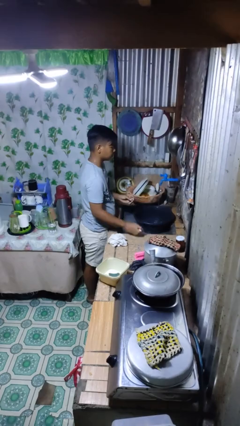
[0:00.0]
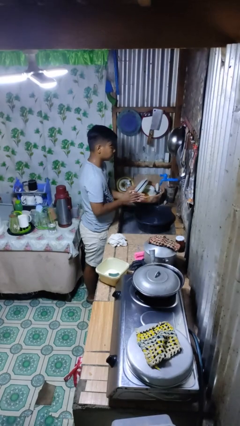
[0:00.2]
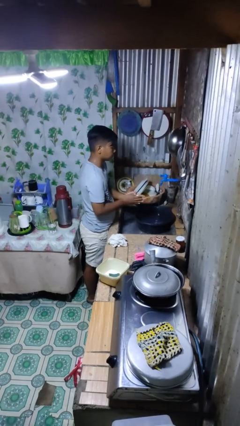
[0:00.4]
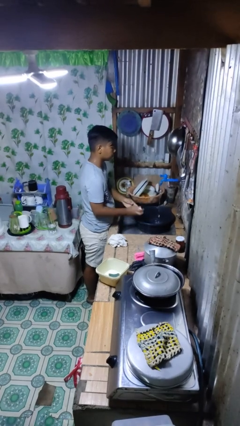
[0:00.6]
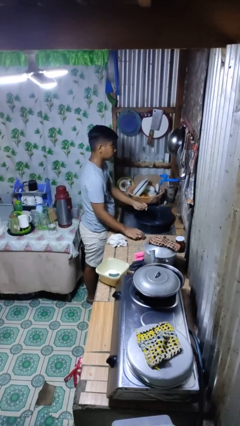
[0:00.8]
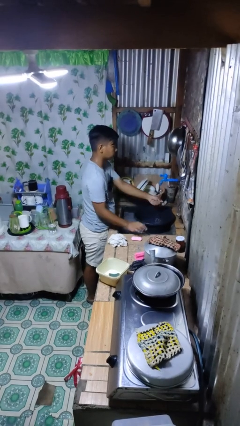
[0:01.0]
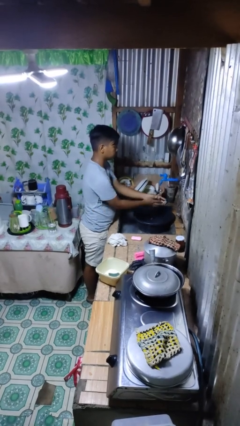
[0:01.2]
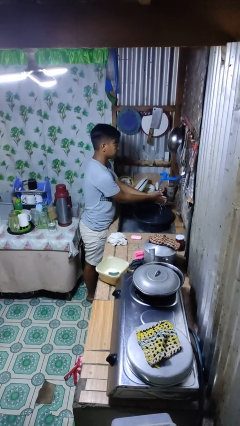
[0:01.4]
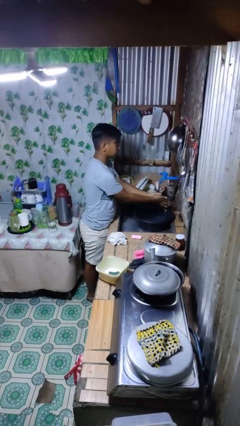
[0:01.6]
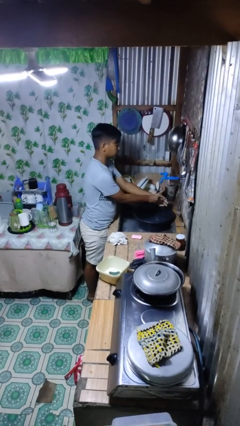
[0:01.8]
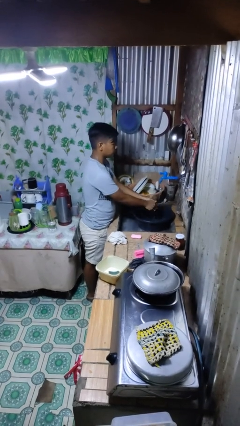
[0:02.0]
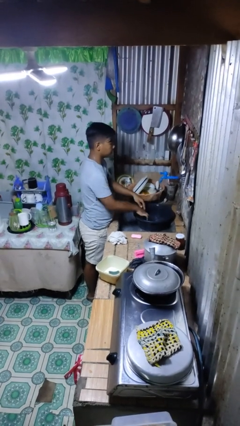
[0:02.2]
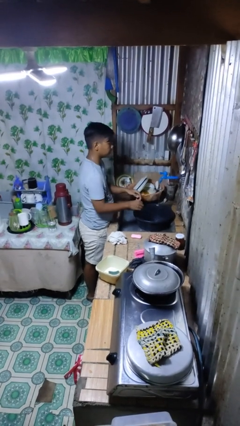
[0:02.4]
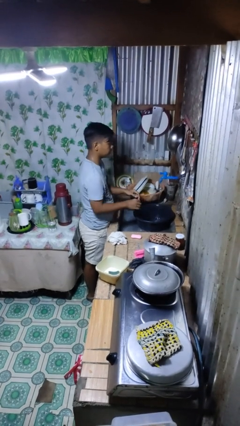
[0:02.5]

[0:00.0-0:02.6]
person washes hands

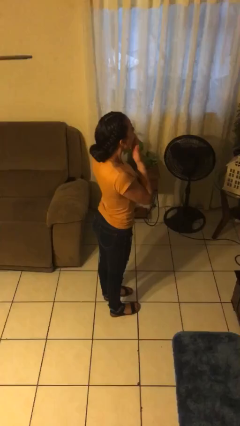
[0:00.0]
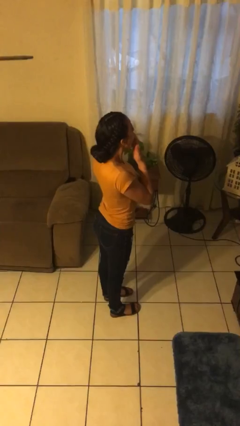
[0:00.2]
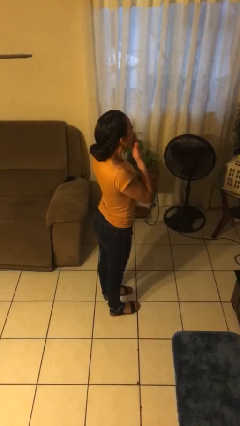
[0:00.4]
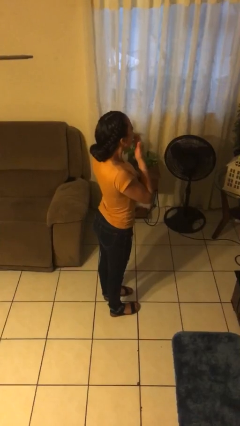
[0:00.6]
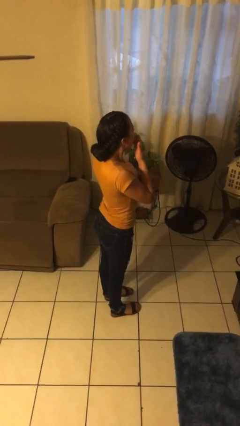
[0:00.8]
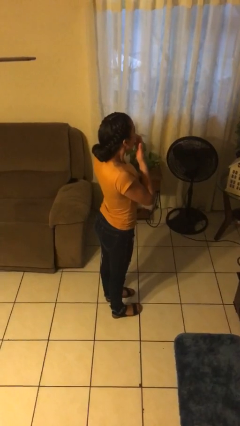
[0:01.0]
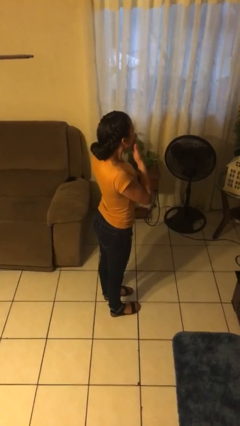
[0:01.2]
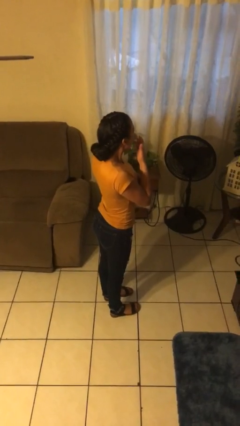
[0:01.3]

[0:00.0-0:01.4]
person yawns

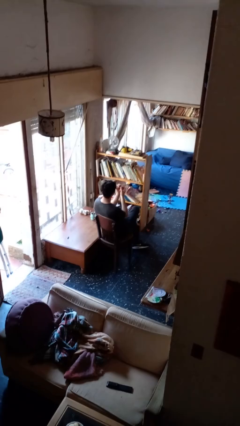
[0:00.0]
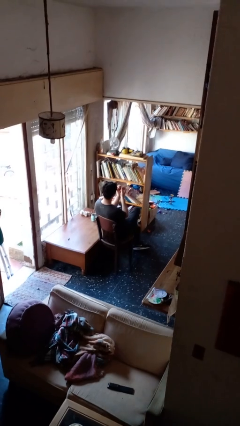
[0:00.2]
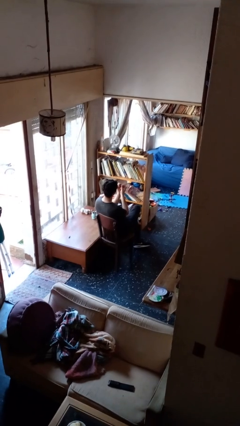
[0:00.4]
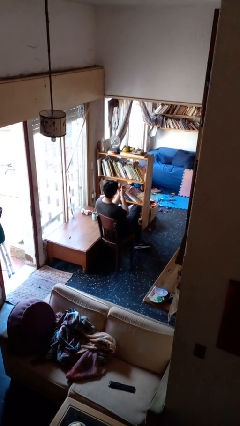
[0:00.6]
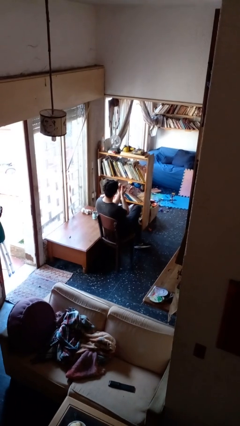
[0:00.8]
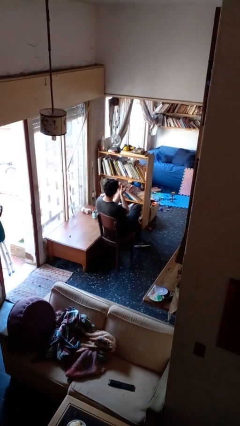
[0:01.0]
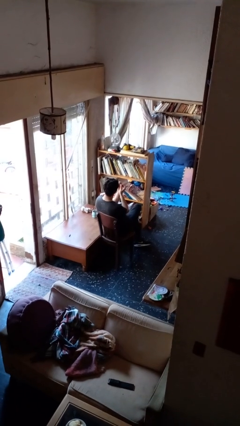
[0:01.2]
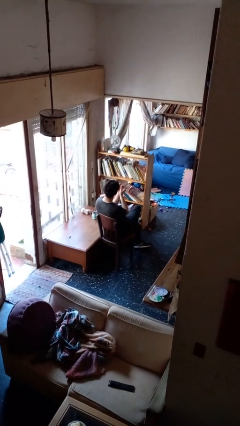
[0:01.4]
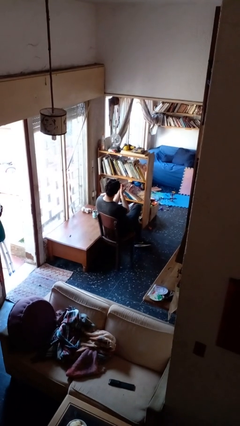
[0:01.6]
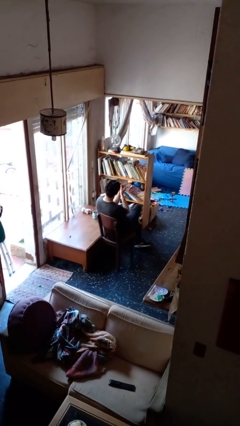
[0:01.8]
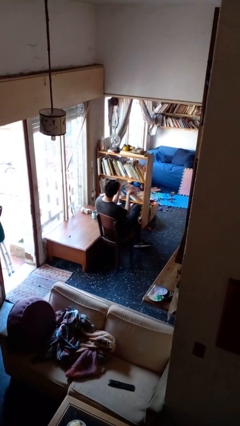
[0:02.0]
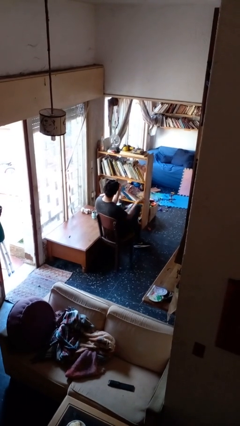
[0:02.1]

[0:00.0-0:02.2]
person files fingernails

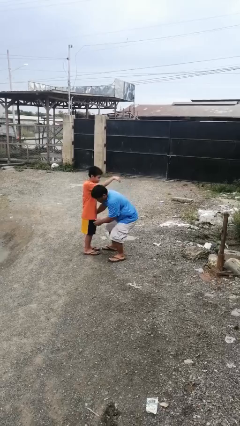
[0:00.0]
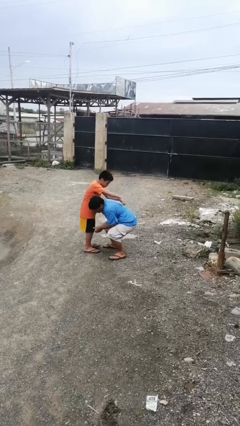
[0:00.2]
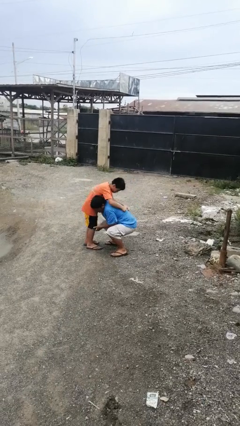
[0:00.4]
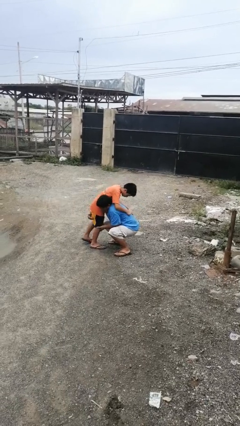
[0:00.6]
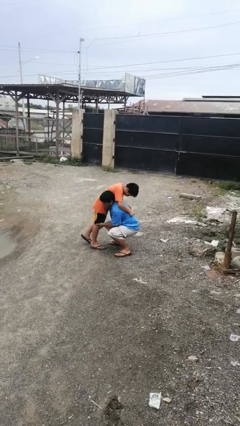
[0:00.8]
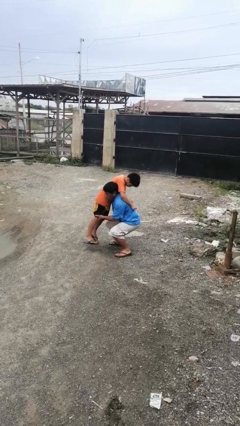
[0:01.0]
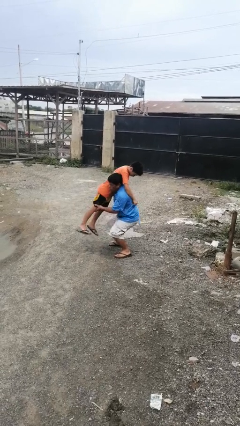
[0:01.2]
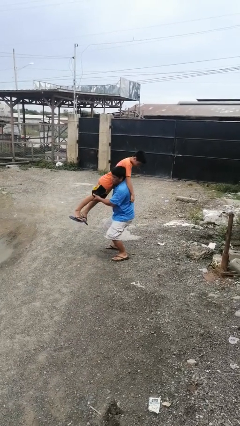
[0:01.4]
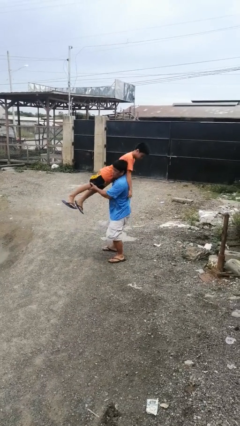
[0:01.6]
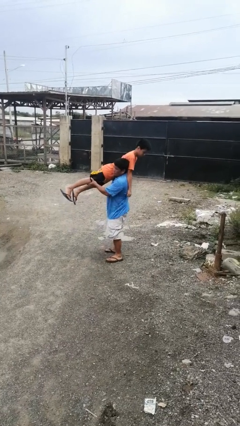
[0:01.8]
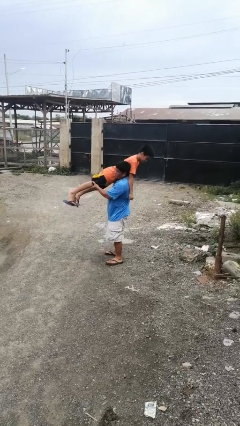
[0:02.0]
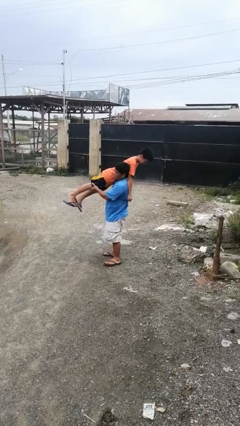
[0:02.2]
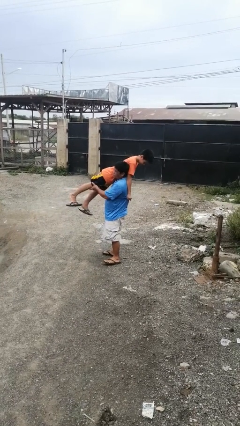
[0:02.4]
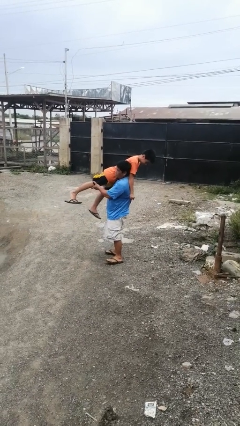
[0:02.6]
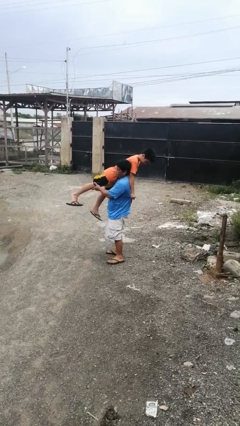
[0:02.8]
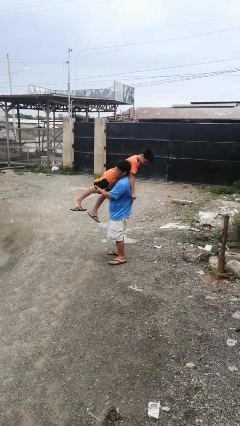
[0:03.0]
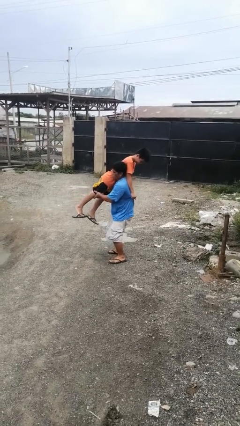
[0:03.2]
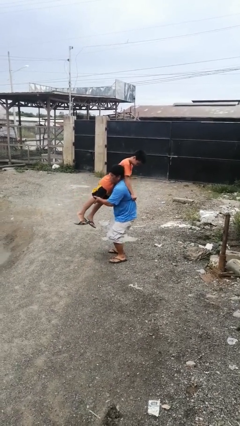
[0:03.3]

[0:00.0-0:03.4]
person carries person over shoulder

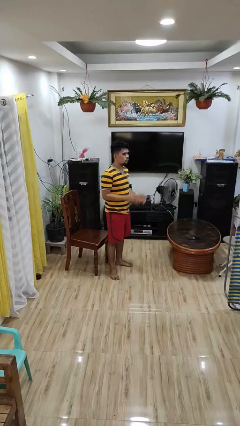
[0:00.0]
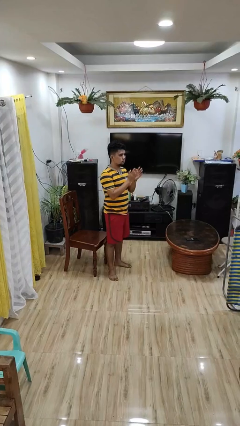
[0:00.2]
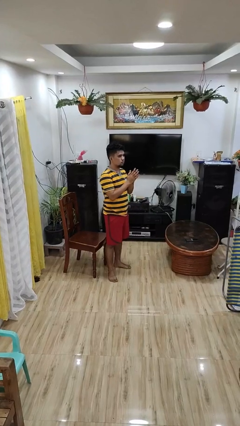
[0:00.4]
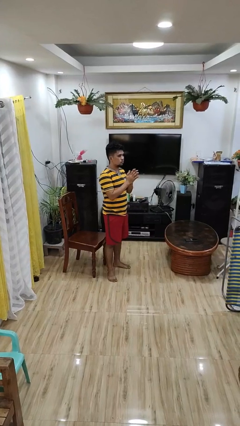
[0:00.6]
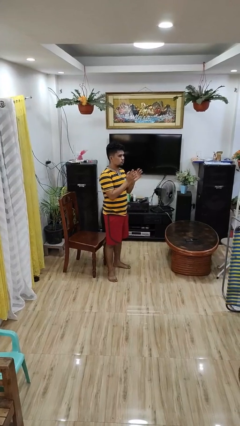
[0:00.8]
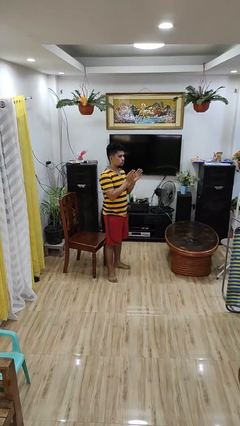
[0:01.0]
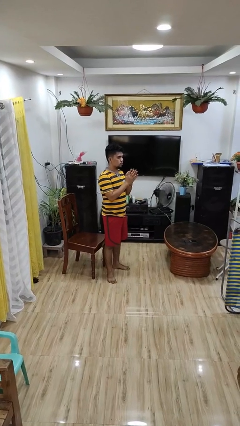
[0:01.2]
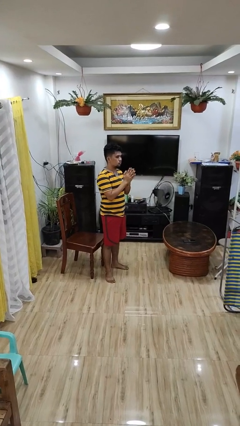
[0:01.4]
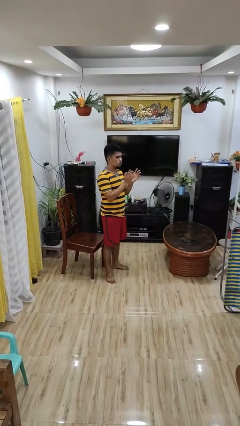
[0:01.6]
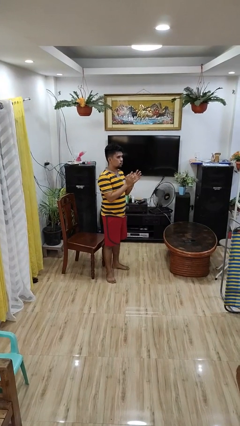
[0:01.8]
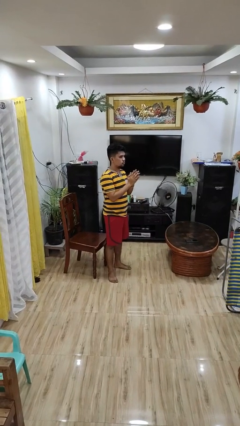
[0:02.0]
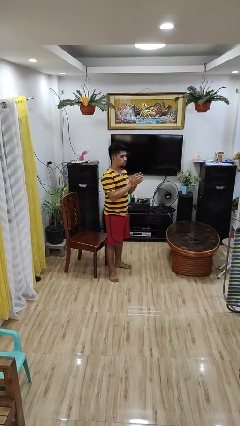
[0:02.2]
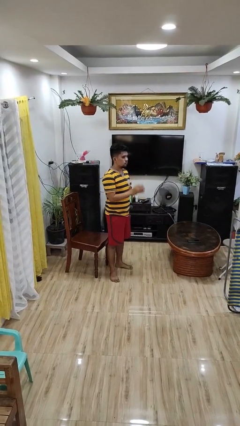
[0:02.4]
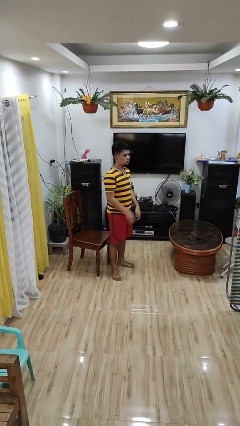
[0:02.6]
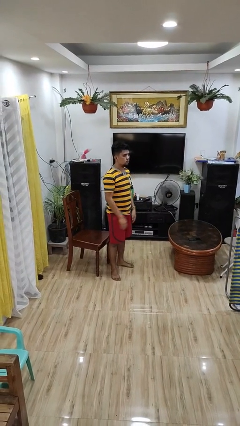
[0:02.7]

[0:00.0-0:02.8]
person claps hands

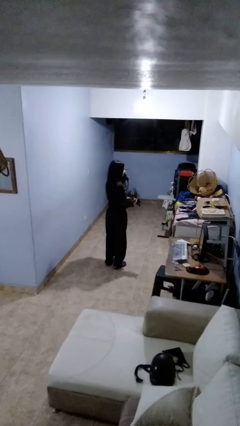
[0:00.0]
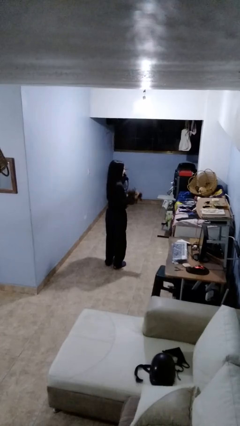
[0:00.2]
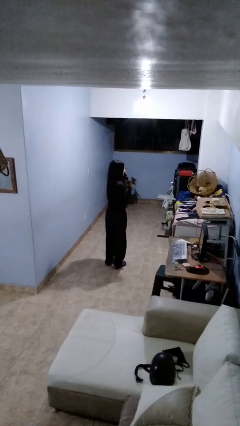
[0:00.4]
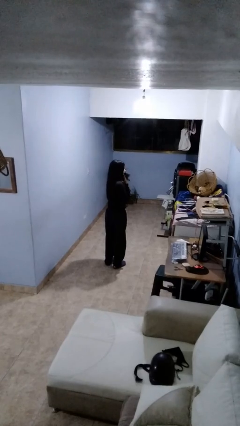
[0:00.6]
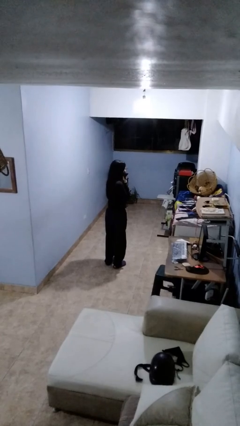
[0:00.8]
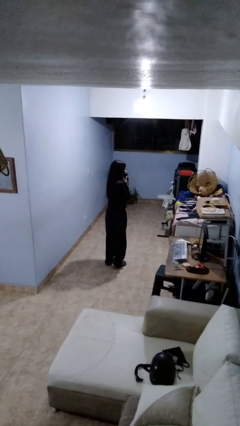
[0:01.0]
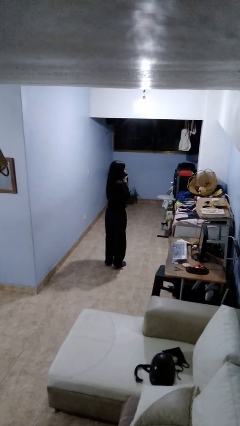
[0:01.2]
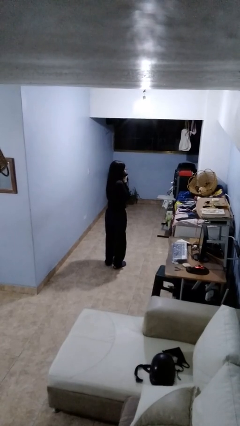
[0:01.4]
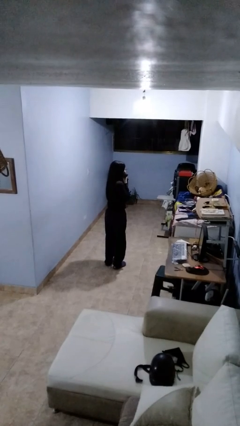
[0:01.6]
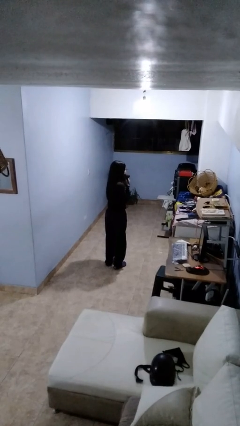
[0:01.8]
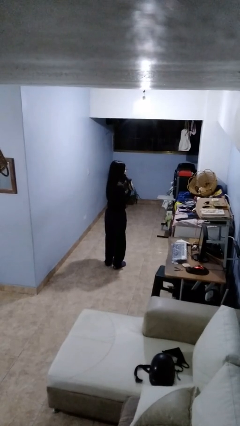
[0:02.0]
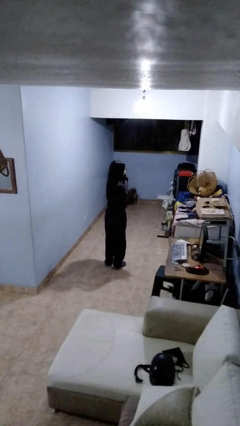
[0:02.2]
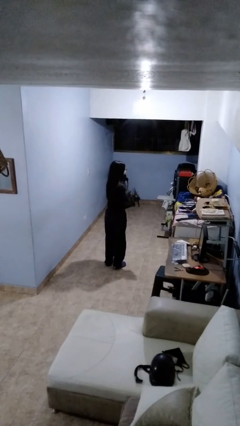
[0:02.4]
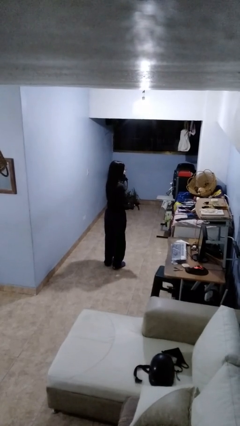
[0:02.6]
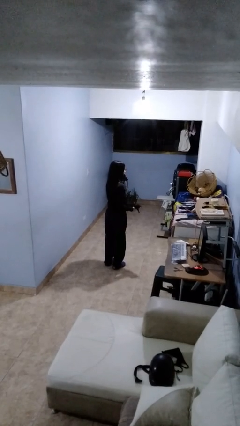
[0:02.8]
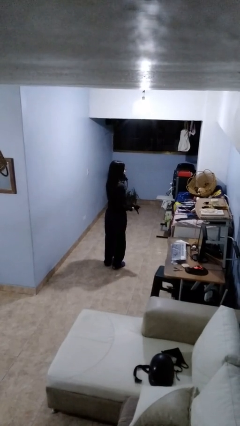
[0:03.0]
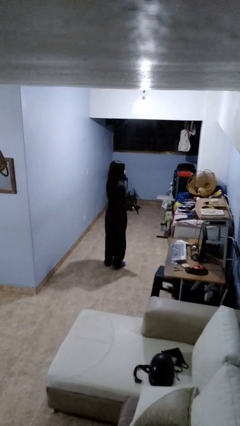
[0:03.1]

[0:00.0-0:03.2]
person hugs cat

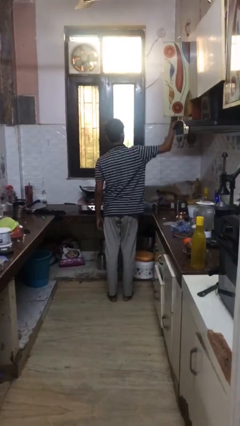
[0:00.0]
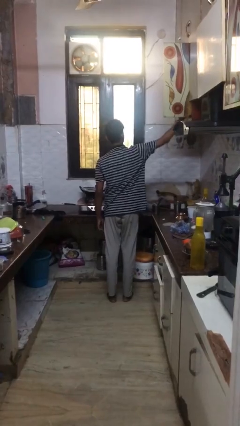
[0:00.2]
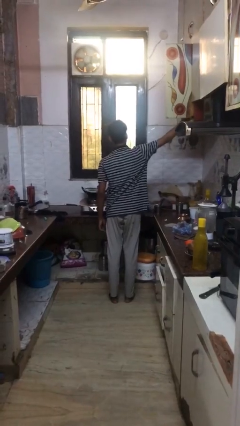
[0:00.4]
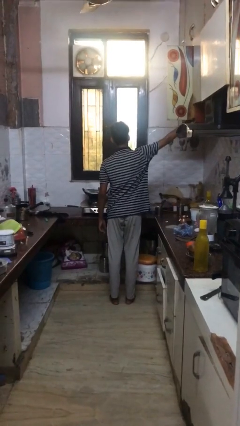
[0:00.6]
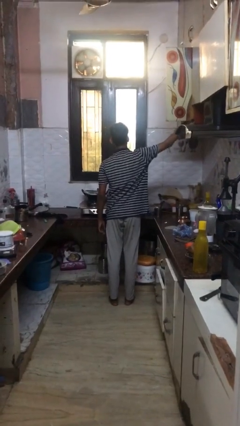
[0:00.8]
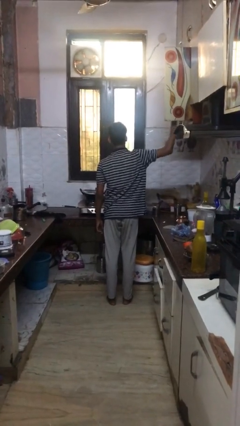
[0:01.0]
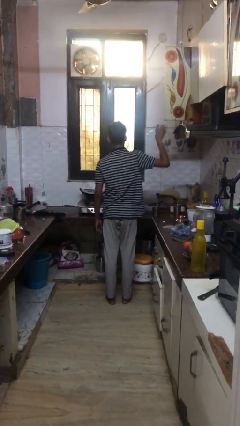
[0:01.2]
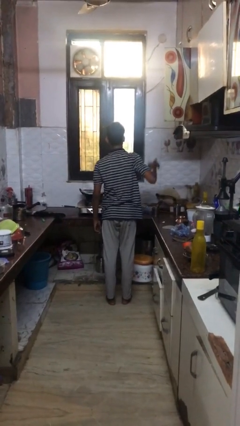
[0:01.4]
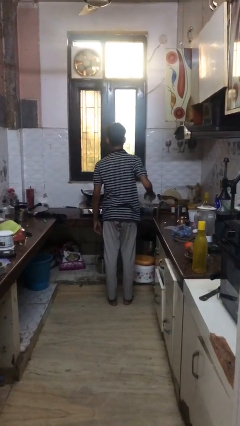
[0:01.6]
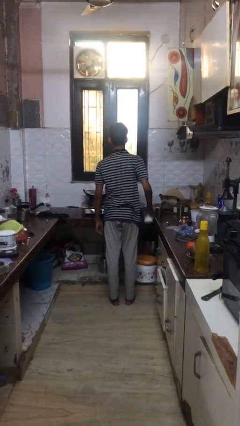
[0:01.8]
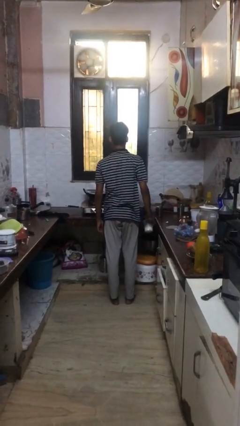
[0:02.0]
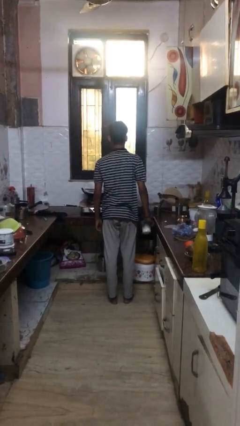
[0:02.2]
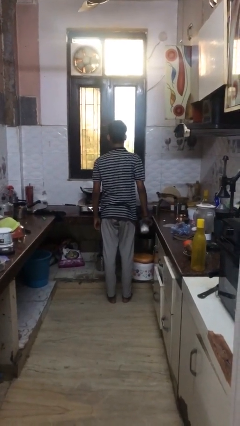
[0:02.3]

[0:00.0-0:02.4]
person puts object in cabinet
